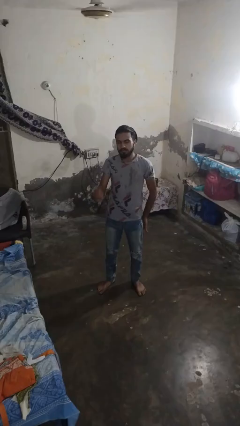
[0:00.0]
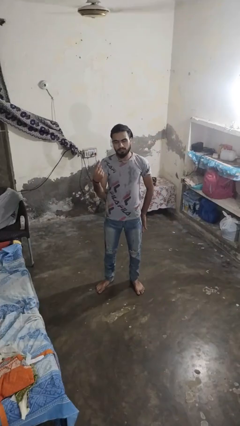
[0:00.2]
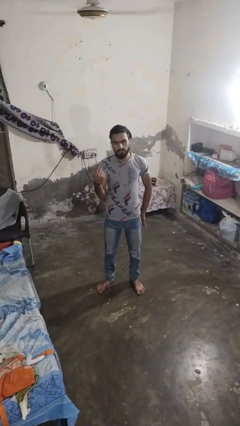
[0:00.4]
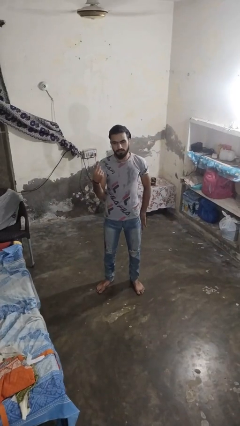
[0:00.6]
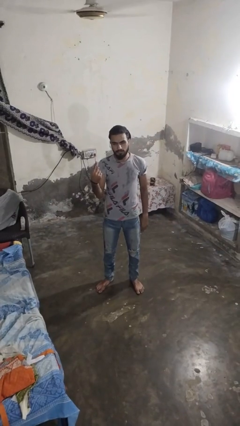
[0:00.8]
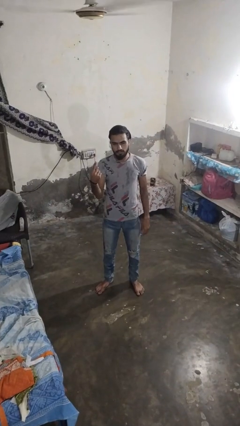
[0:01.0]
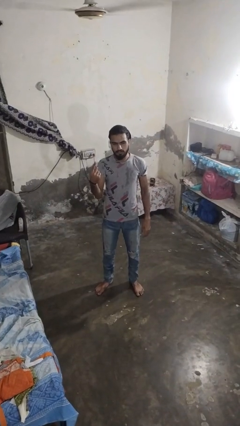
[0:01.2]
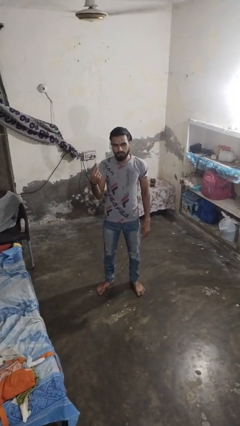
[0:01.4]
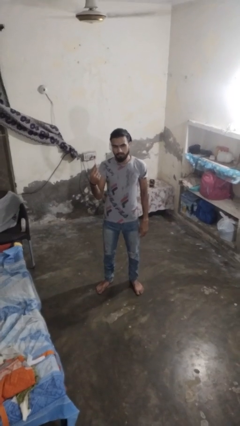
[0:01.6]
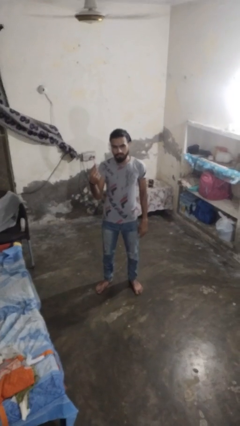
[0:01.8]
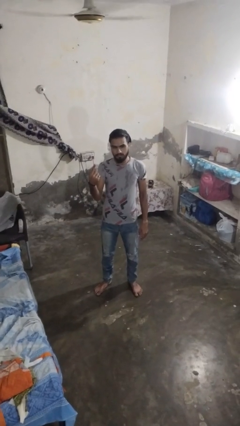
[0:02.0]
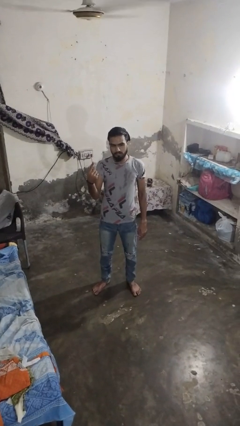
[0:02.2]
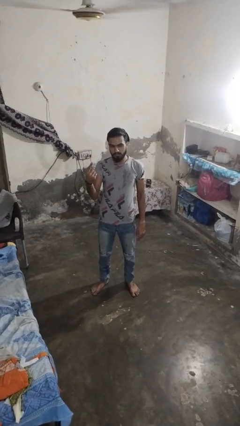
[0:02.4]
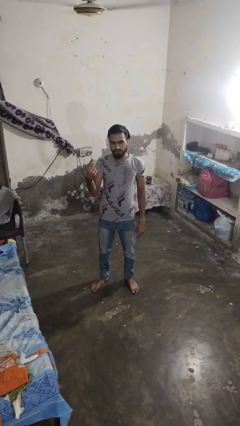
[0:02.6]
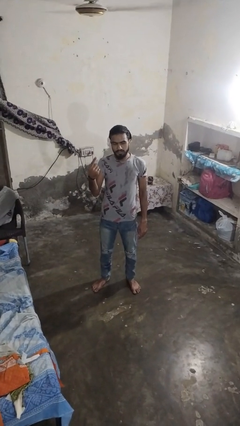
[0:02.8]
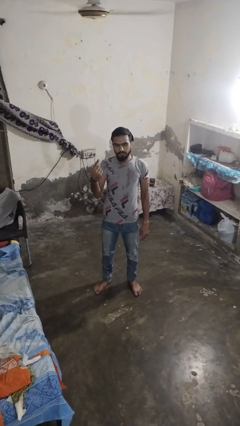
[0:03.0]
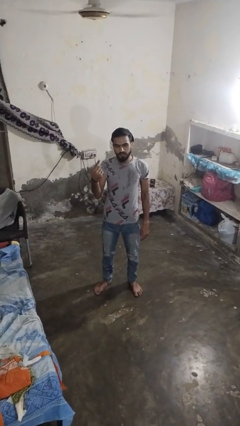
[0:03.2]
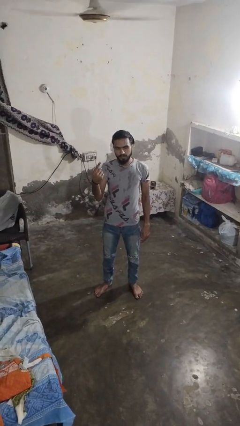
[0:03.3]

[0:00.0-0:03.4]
person gestures number one

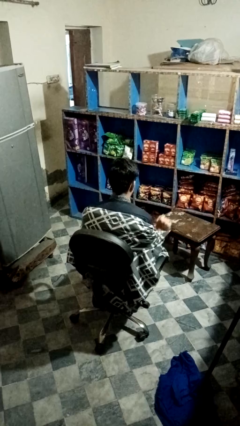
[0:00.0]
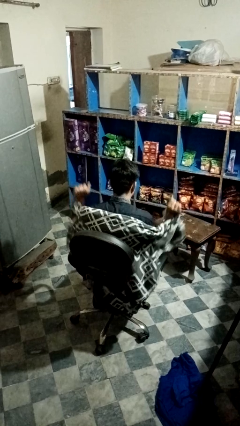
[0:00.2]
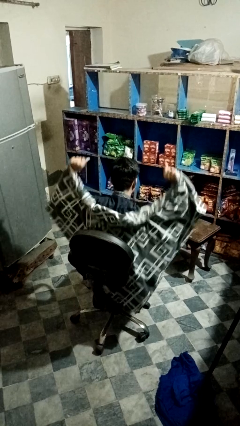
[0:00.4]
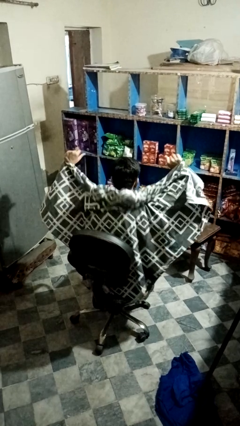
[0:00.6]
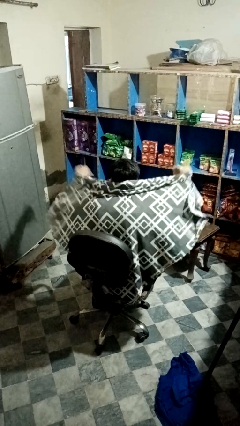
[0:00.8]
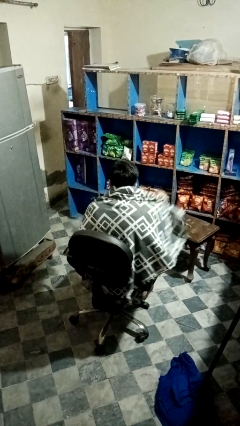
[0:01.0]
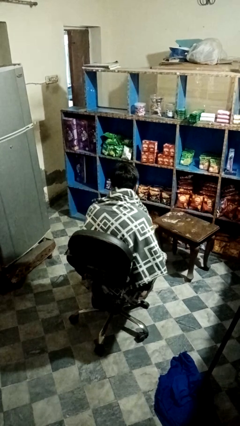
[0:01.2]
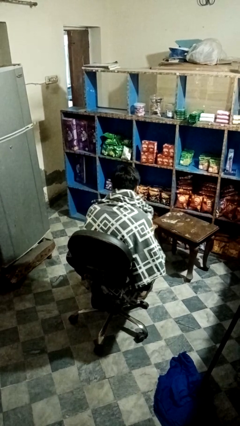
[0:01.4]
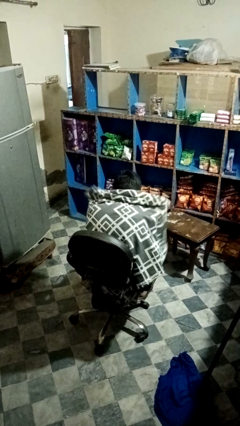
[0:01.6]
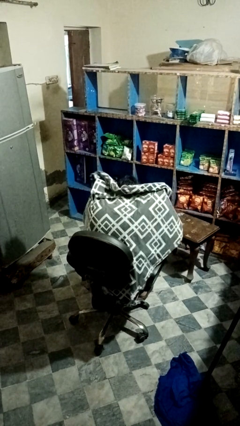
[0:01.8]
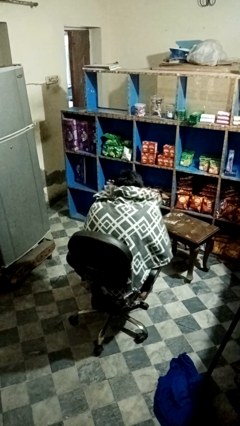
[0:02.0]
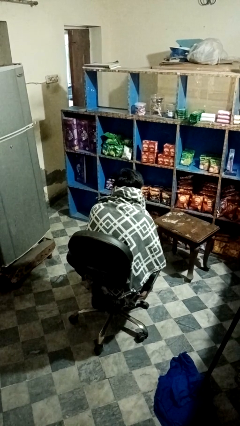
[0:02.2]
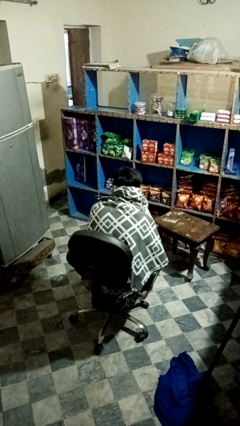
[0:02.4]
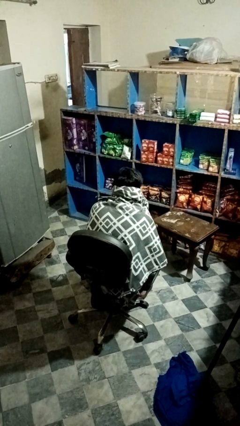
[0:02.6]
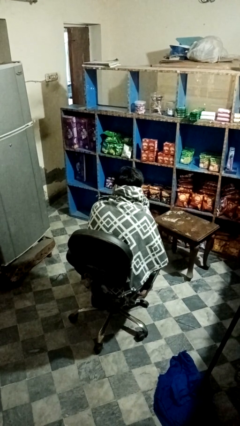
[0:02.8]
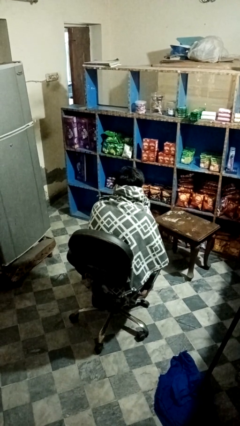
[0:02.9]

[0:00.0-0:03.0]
person covers with blanket

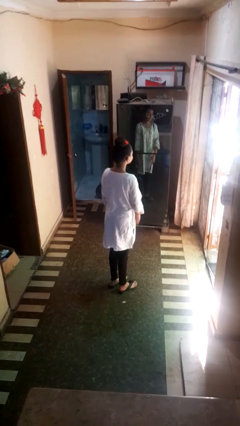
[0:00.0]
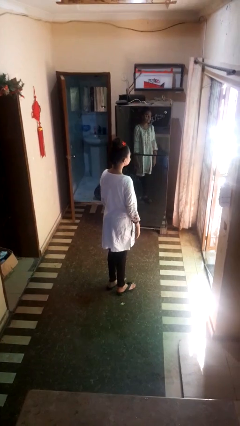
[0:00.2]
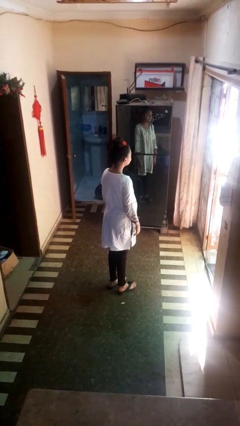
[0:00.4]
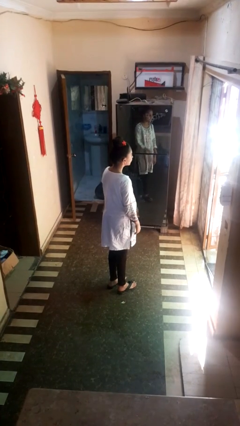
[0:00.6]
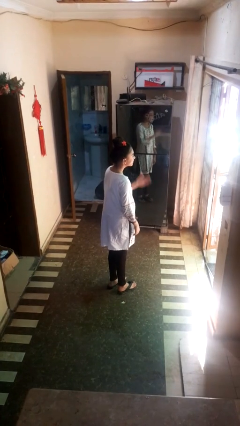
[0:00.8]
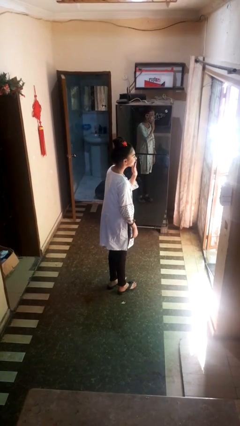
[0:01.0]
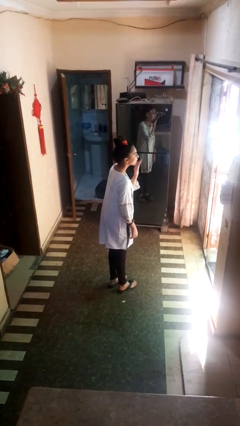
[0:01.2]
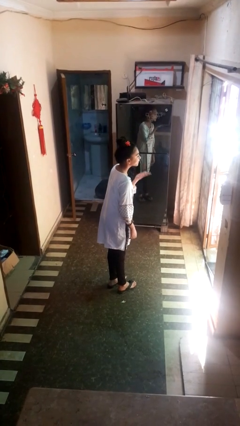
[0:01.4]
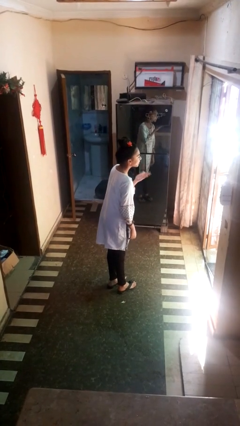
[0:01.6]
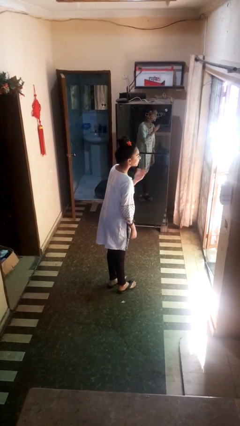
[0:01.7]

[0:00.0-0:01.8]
person gestures blow kiss

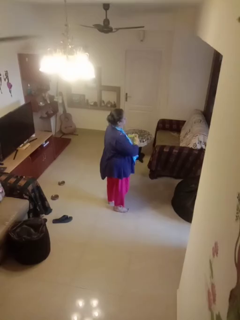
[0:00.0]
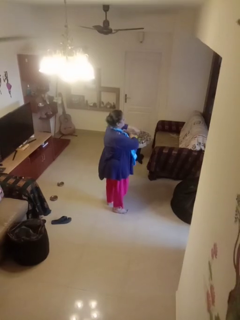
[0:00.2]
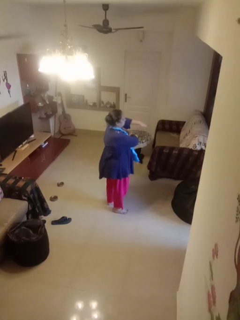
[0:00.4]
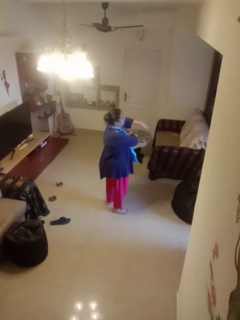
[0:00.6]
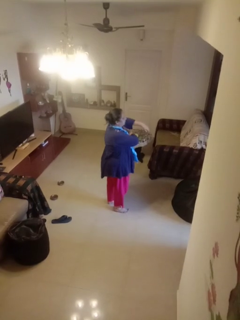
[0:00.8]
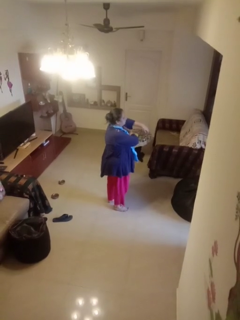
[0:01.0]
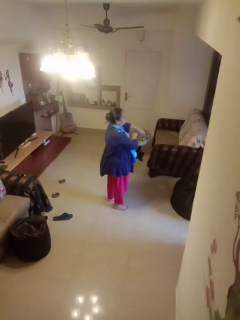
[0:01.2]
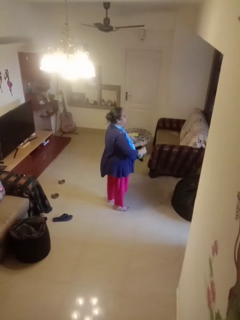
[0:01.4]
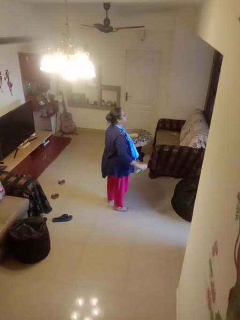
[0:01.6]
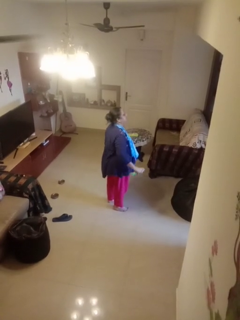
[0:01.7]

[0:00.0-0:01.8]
person applies deodorant

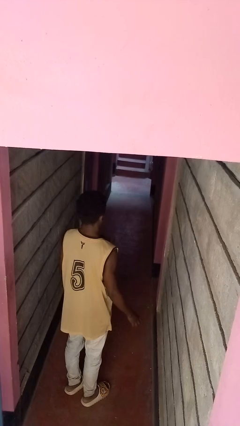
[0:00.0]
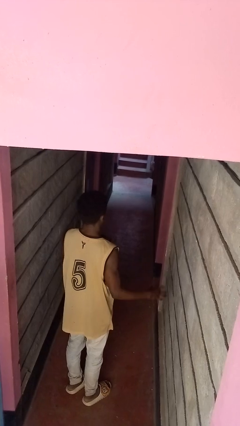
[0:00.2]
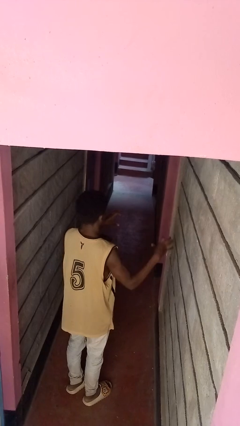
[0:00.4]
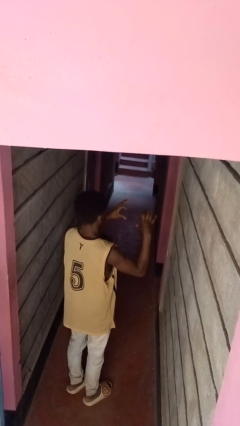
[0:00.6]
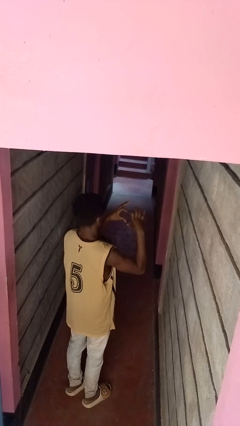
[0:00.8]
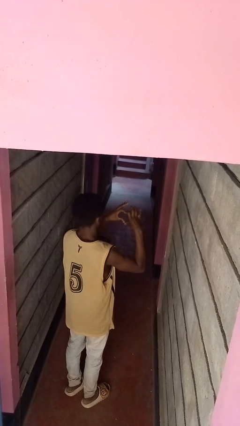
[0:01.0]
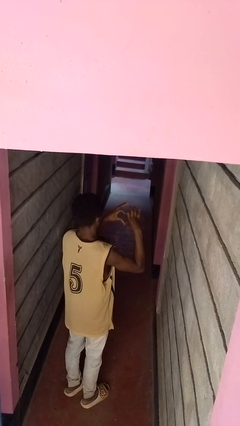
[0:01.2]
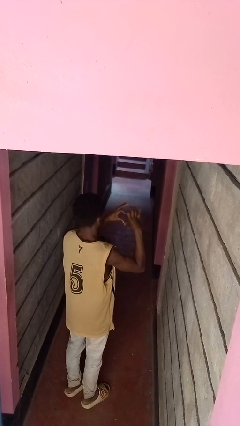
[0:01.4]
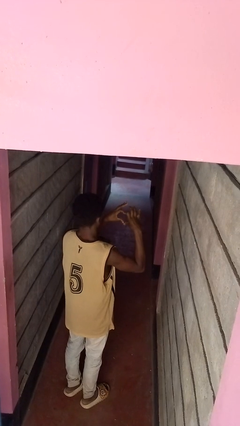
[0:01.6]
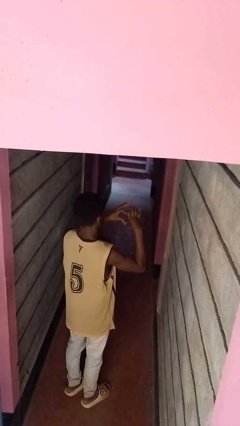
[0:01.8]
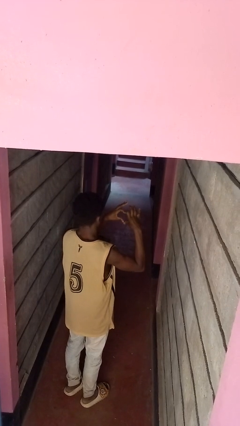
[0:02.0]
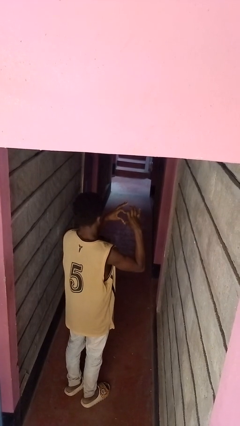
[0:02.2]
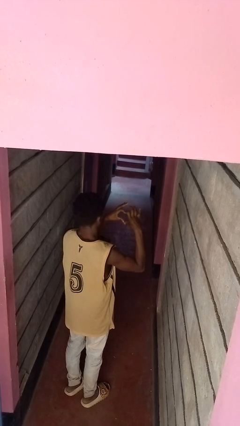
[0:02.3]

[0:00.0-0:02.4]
person gestures heart

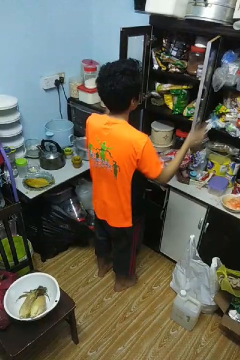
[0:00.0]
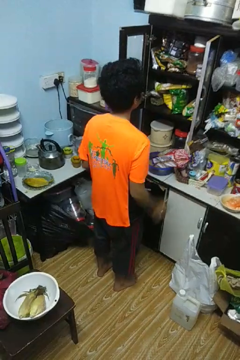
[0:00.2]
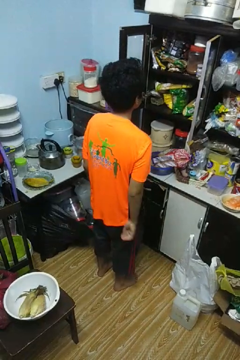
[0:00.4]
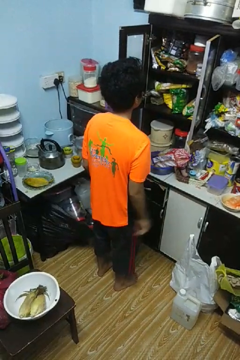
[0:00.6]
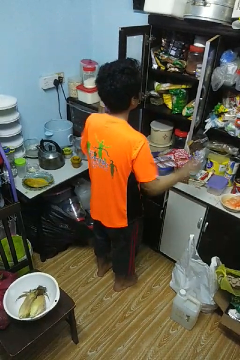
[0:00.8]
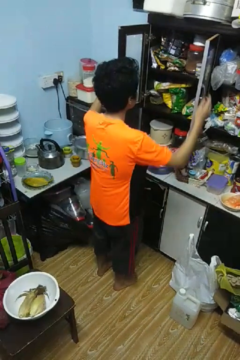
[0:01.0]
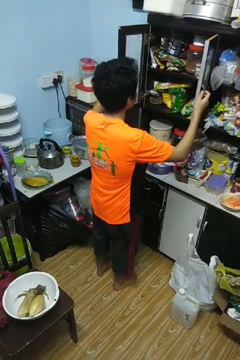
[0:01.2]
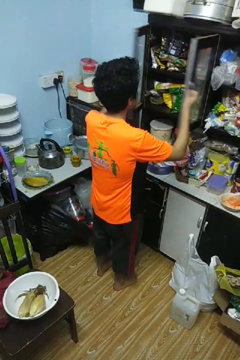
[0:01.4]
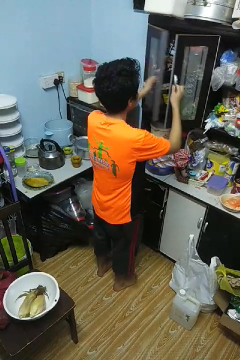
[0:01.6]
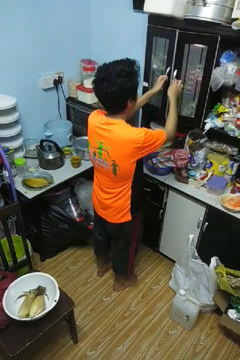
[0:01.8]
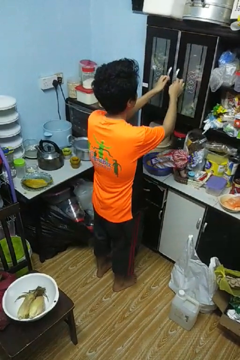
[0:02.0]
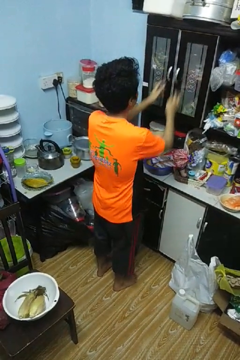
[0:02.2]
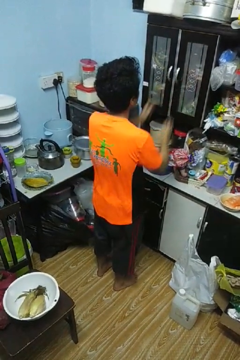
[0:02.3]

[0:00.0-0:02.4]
person closes cabinet

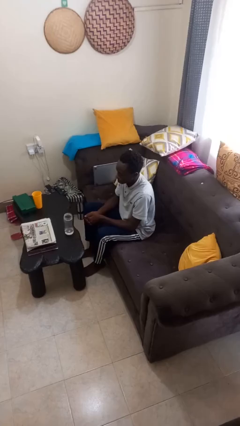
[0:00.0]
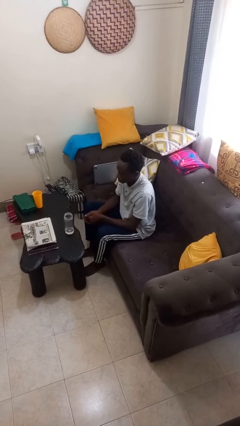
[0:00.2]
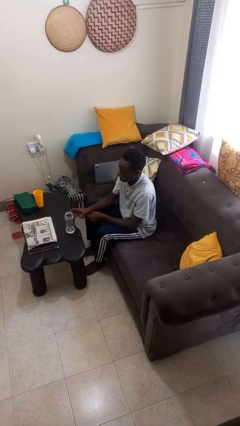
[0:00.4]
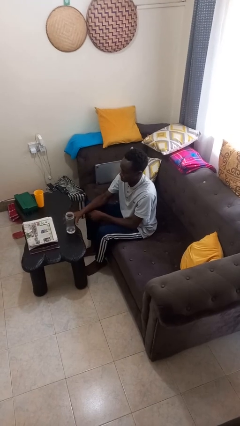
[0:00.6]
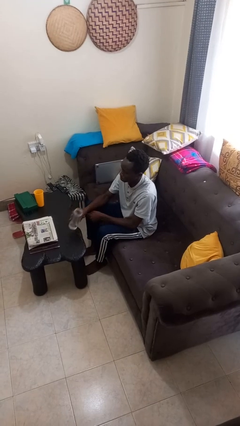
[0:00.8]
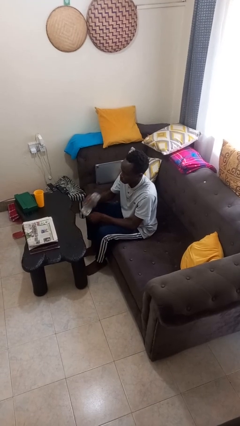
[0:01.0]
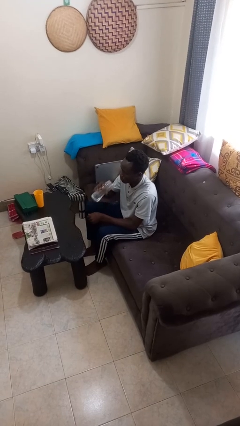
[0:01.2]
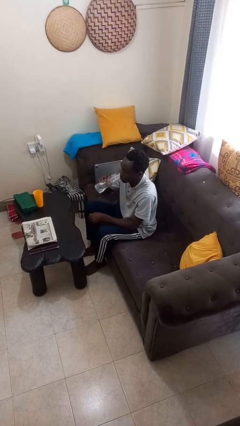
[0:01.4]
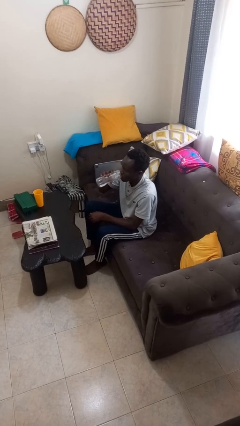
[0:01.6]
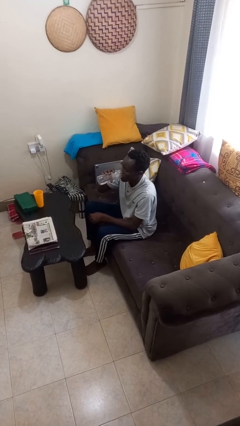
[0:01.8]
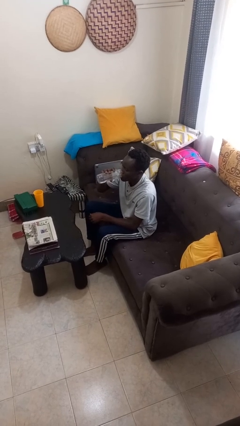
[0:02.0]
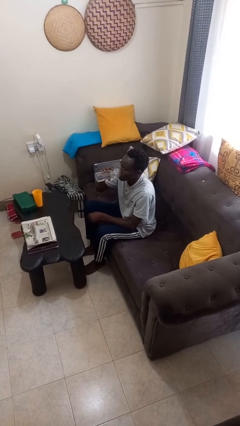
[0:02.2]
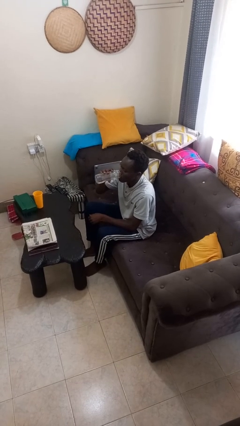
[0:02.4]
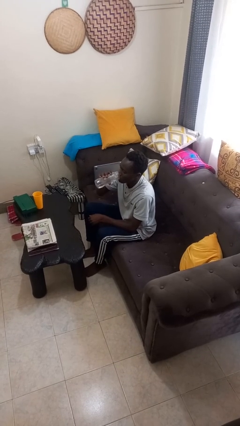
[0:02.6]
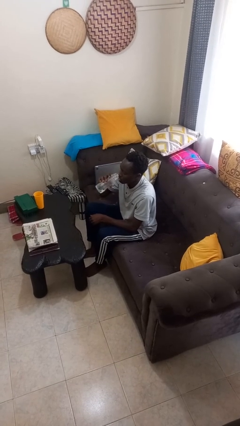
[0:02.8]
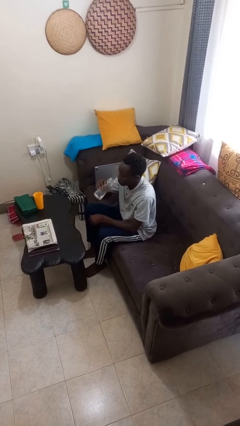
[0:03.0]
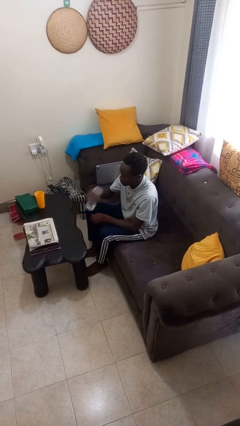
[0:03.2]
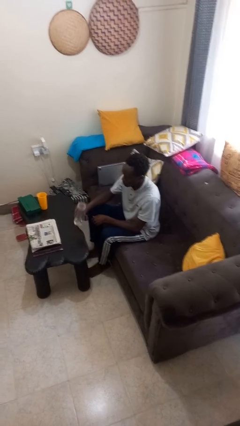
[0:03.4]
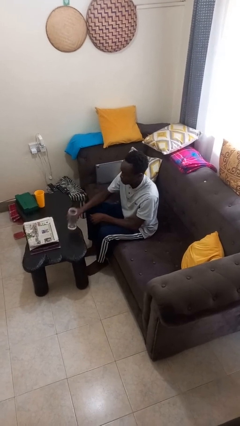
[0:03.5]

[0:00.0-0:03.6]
person drinks from bottle
